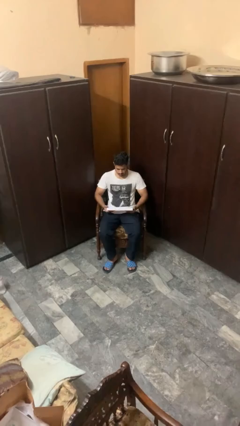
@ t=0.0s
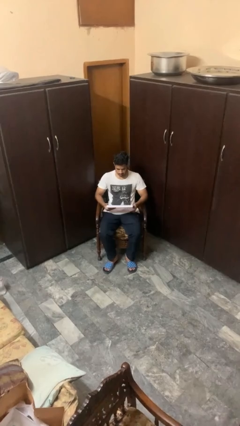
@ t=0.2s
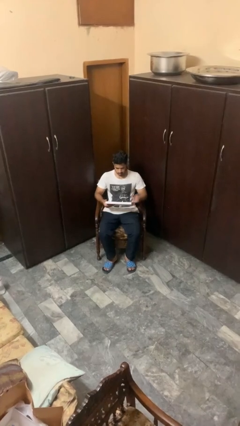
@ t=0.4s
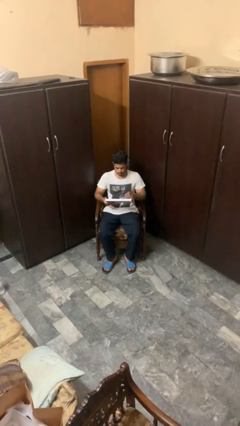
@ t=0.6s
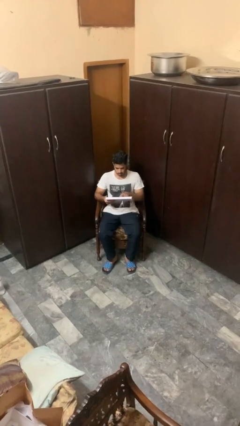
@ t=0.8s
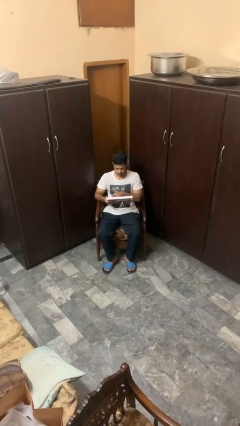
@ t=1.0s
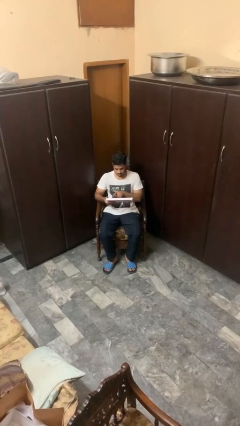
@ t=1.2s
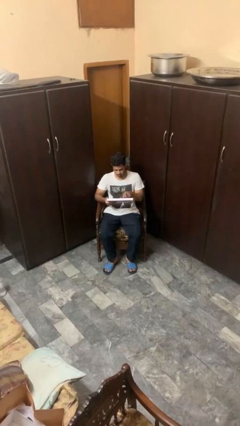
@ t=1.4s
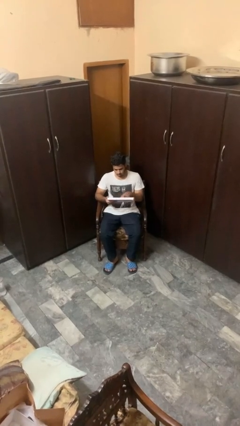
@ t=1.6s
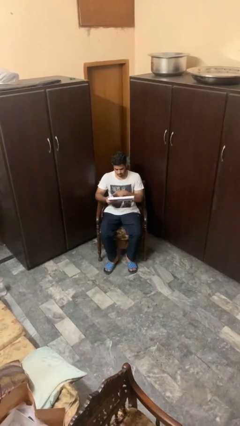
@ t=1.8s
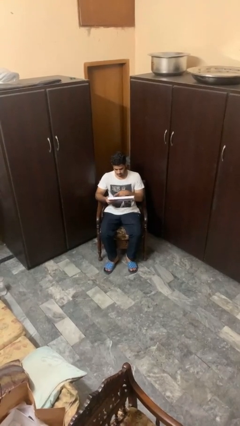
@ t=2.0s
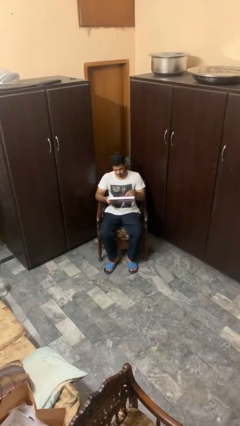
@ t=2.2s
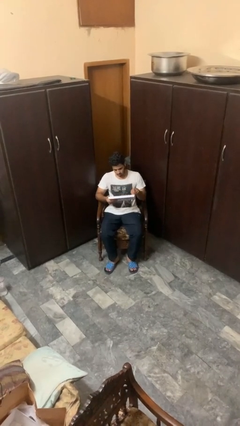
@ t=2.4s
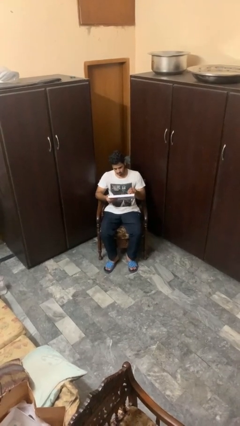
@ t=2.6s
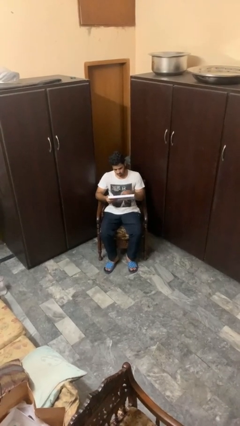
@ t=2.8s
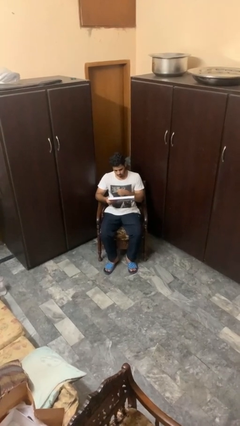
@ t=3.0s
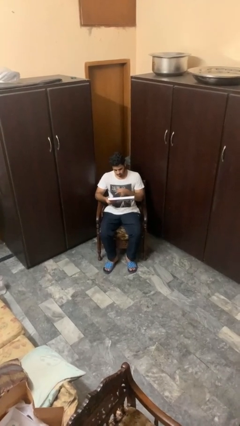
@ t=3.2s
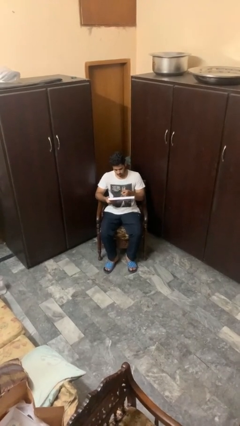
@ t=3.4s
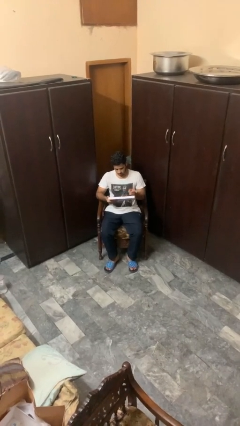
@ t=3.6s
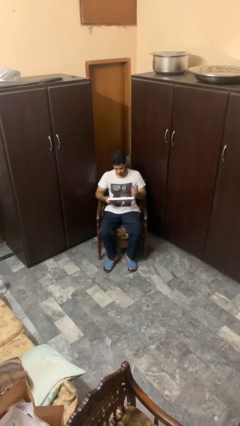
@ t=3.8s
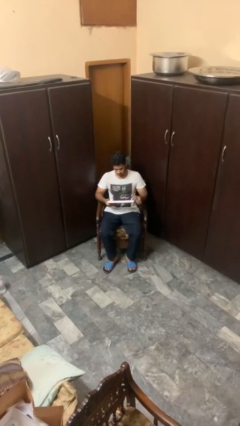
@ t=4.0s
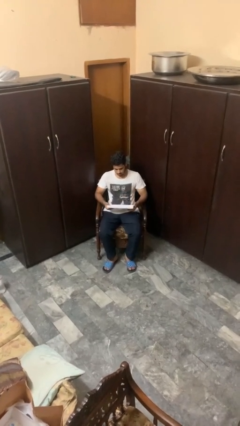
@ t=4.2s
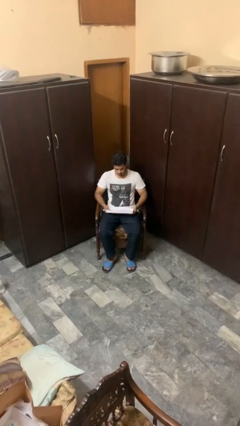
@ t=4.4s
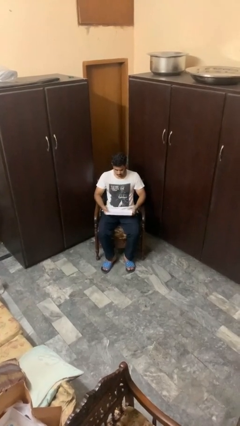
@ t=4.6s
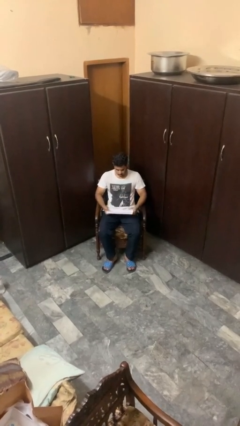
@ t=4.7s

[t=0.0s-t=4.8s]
person interacts with tablet

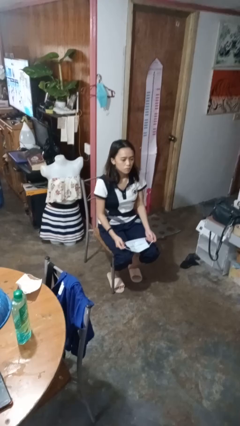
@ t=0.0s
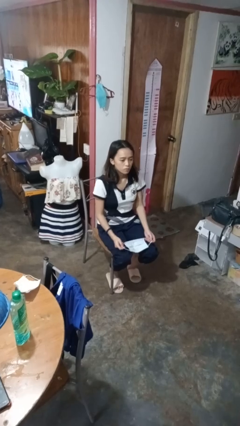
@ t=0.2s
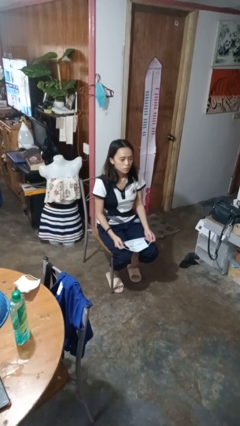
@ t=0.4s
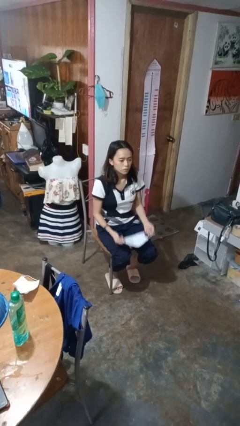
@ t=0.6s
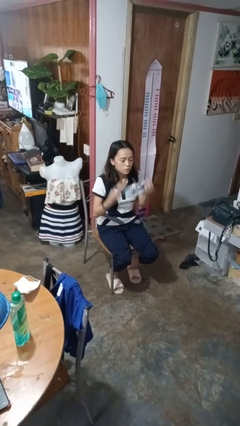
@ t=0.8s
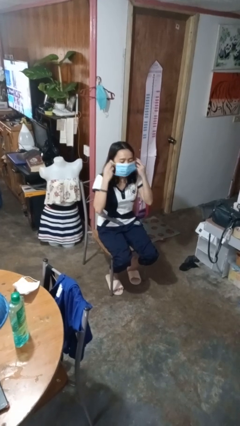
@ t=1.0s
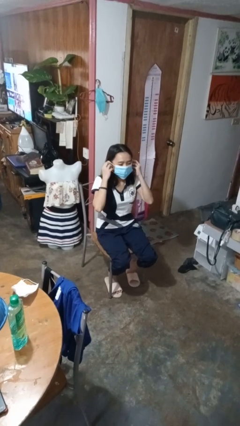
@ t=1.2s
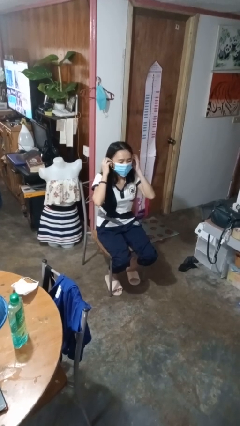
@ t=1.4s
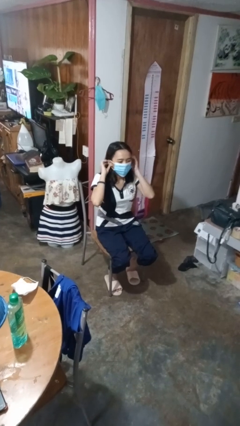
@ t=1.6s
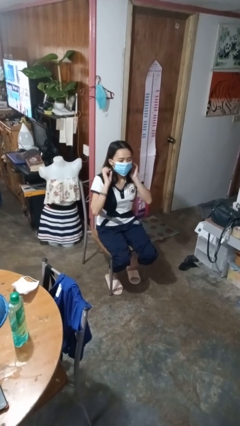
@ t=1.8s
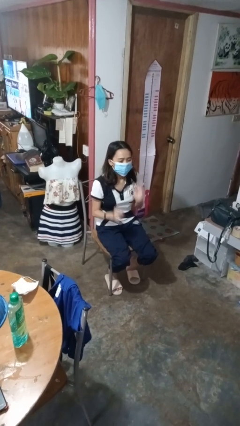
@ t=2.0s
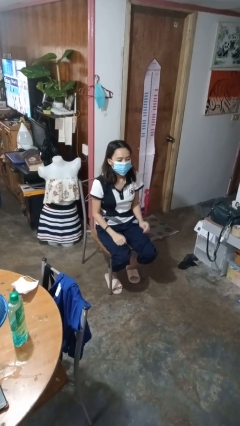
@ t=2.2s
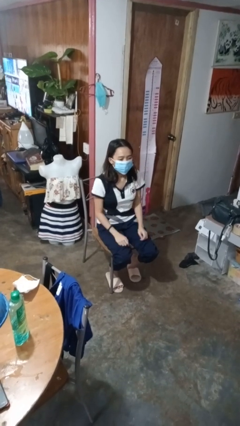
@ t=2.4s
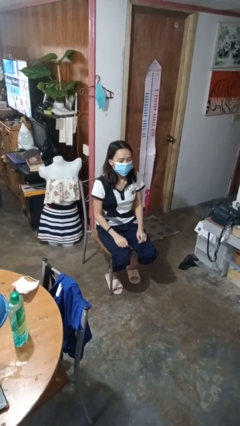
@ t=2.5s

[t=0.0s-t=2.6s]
person puts on facemask

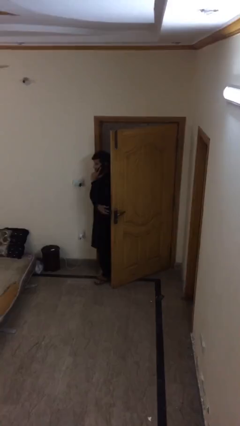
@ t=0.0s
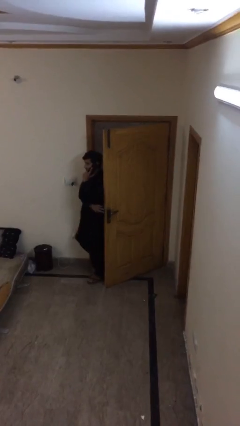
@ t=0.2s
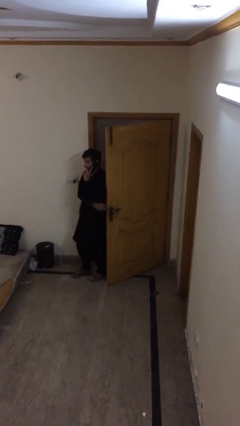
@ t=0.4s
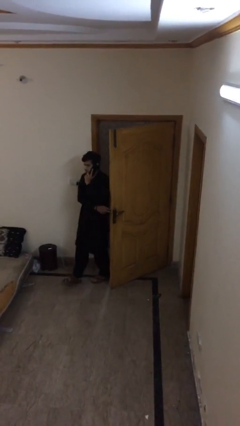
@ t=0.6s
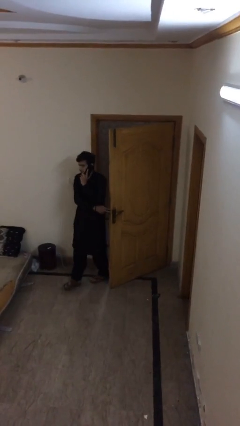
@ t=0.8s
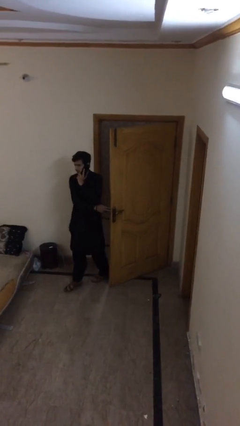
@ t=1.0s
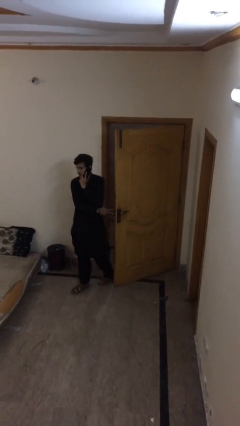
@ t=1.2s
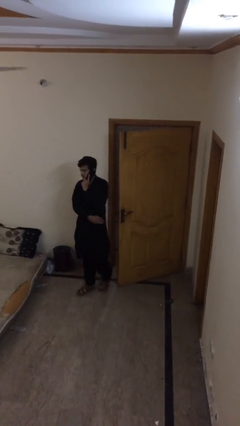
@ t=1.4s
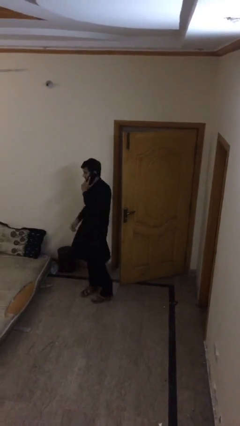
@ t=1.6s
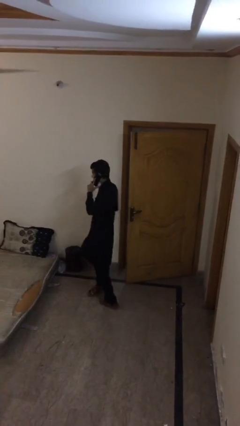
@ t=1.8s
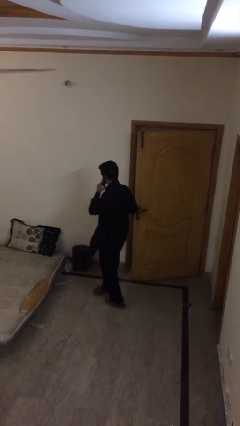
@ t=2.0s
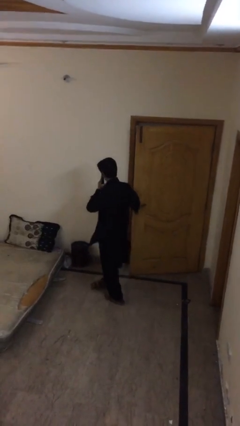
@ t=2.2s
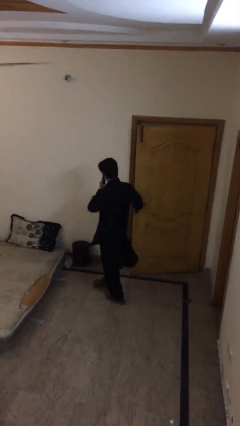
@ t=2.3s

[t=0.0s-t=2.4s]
person enters scene through structure

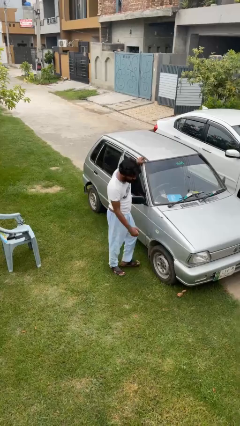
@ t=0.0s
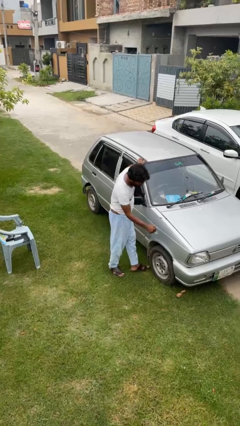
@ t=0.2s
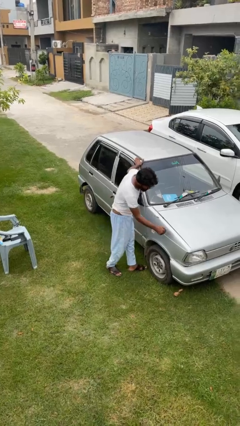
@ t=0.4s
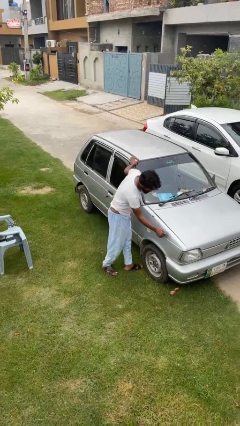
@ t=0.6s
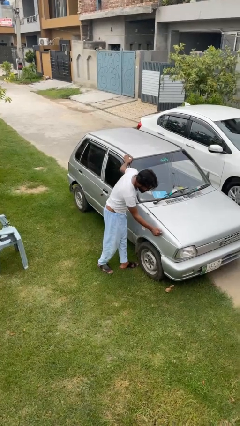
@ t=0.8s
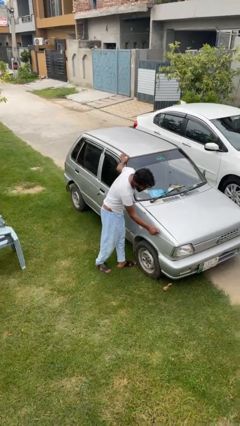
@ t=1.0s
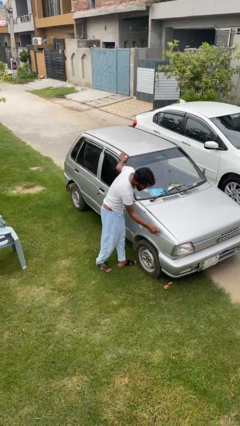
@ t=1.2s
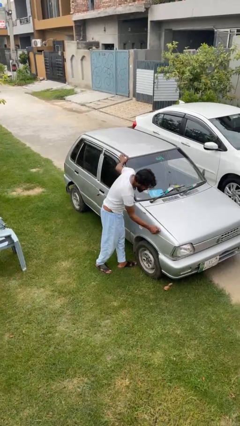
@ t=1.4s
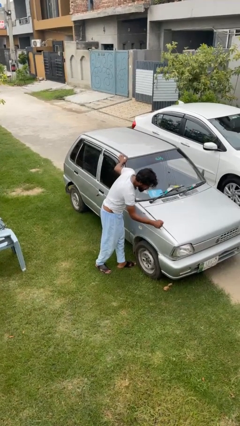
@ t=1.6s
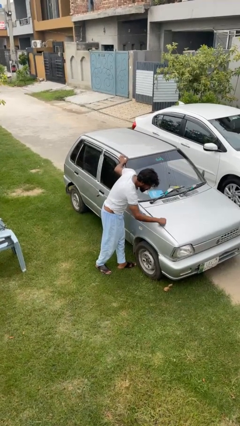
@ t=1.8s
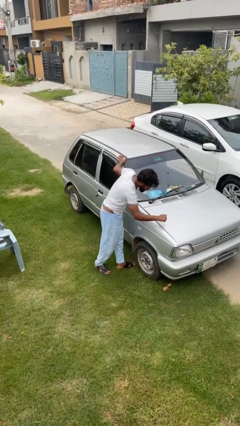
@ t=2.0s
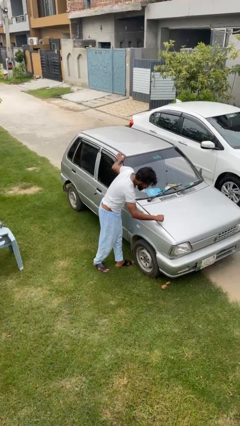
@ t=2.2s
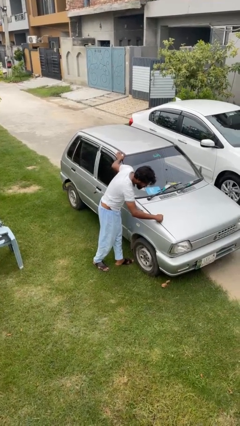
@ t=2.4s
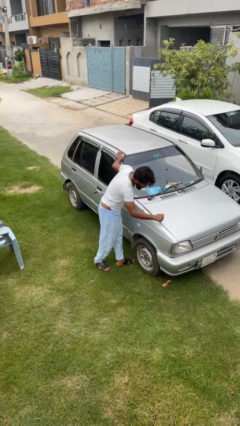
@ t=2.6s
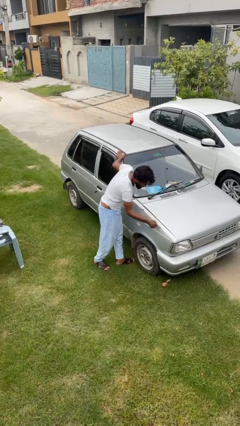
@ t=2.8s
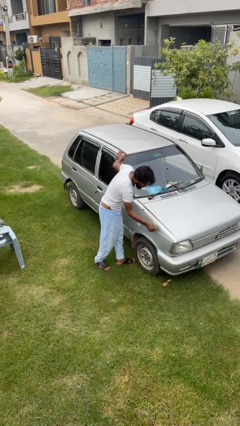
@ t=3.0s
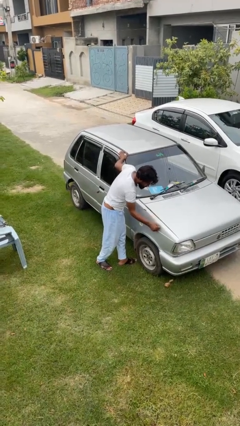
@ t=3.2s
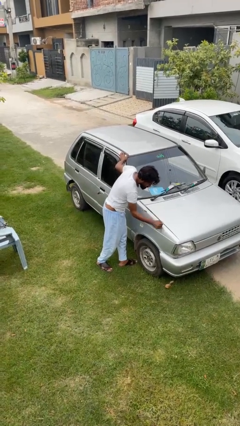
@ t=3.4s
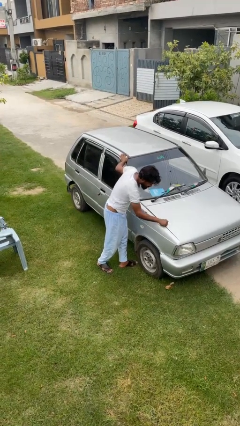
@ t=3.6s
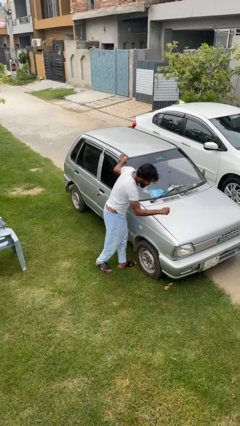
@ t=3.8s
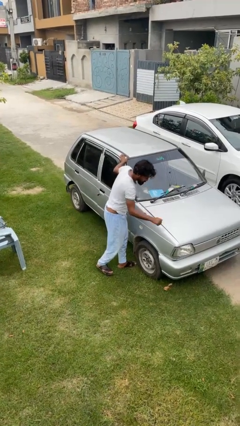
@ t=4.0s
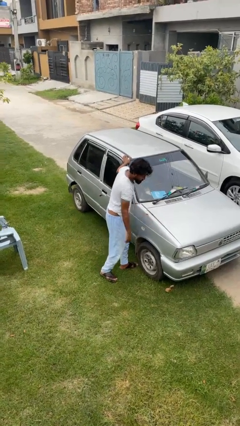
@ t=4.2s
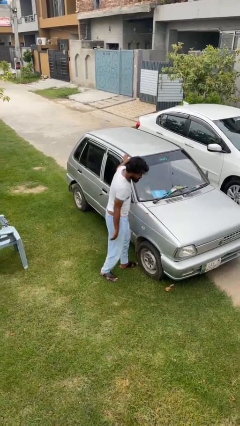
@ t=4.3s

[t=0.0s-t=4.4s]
person taps object with finger

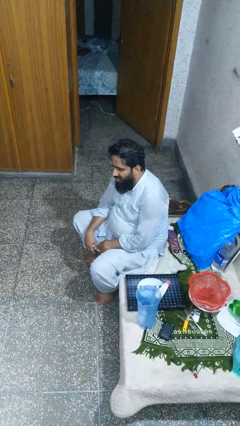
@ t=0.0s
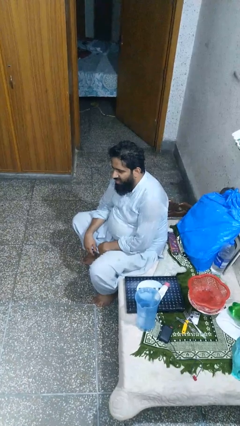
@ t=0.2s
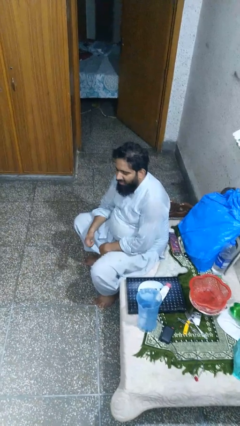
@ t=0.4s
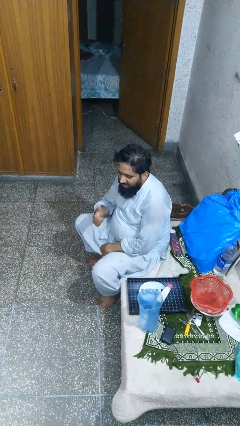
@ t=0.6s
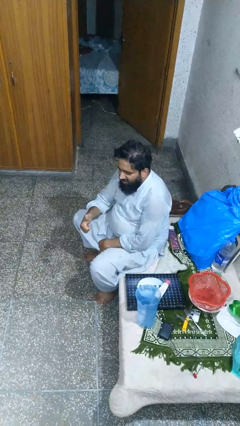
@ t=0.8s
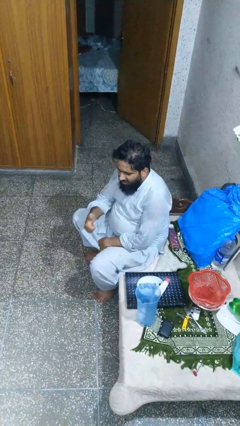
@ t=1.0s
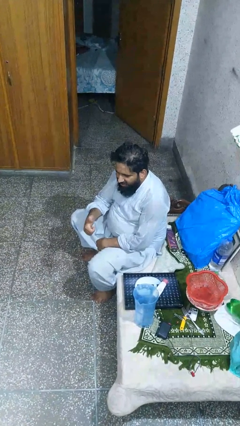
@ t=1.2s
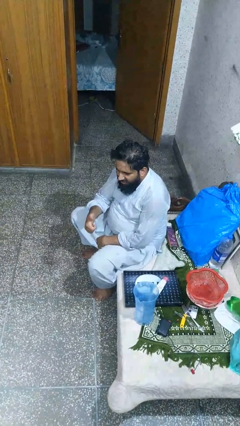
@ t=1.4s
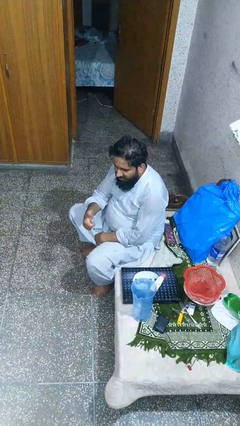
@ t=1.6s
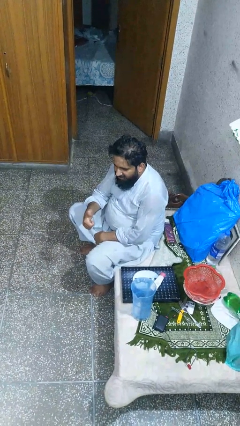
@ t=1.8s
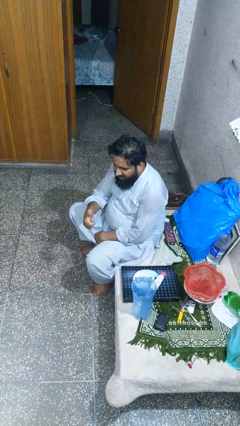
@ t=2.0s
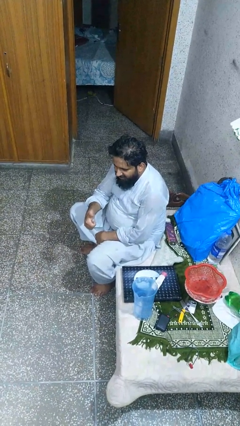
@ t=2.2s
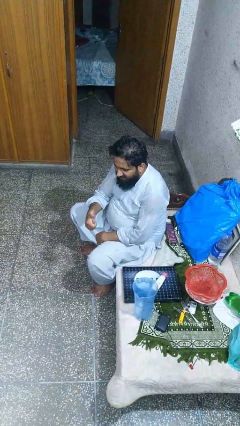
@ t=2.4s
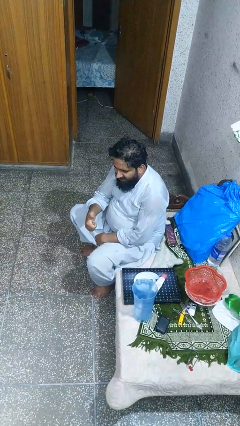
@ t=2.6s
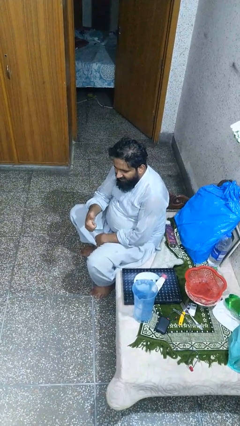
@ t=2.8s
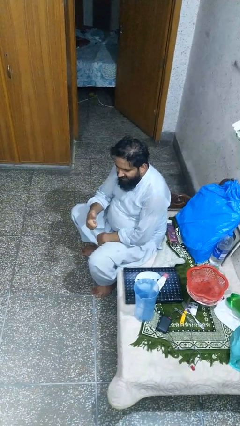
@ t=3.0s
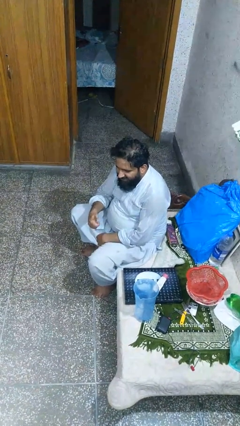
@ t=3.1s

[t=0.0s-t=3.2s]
person gestures thumbs up
